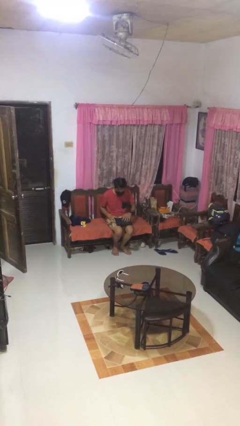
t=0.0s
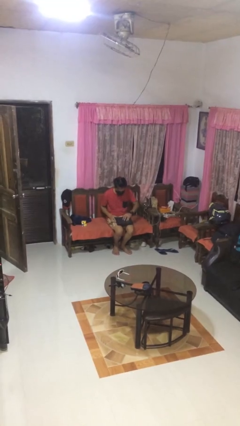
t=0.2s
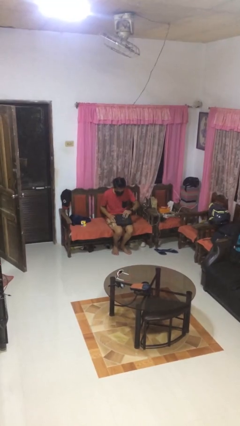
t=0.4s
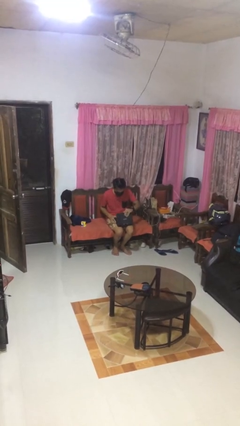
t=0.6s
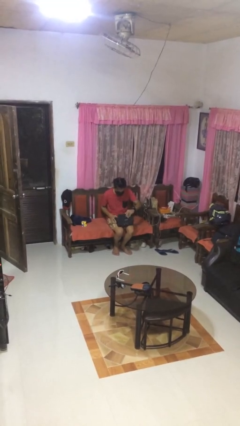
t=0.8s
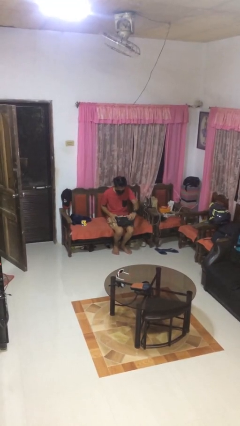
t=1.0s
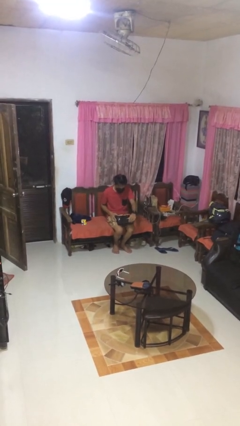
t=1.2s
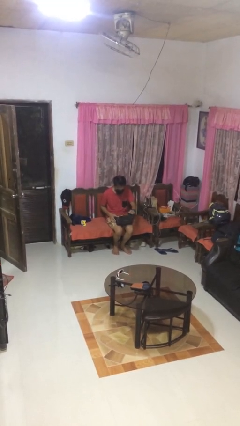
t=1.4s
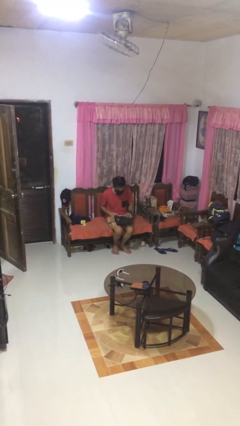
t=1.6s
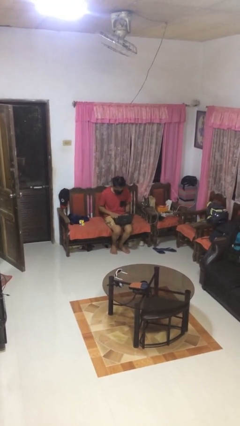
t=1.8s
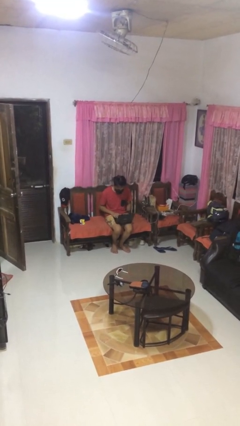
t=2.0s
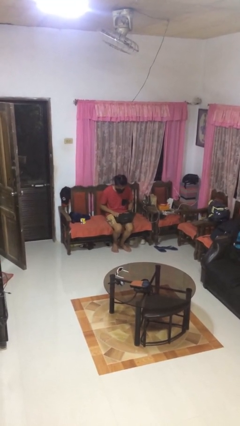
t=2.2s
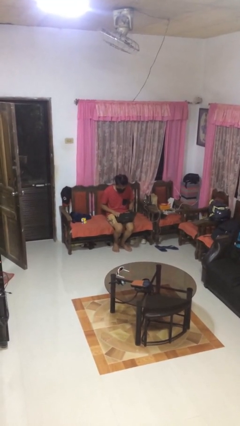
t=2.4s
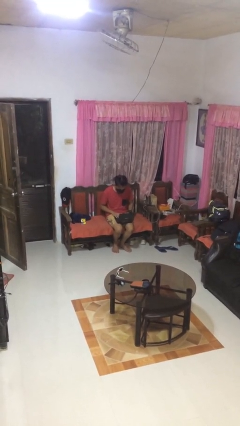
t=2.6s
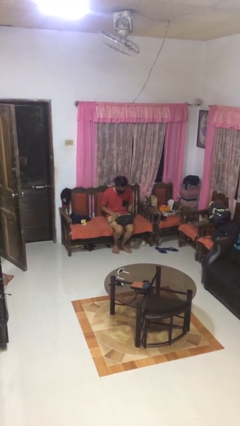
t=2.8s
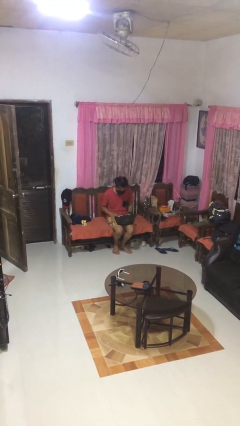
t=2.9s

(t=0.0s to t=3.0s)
person opens laptop

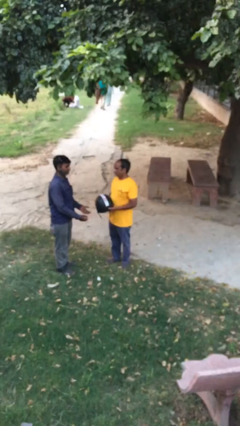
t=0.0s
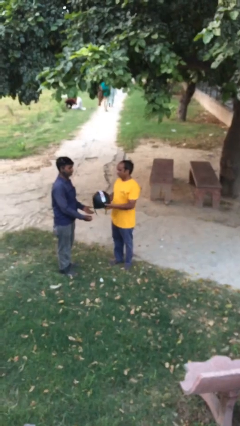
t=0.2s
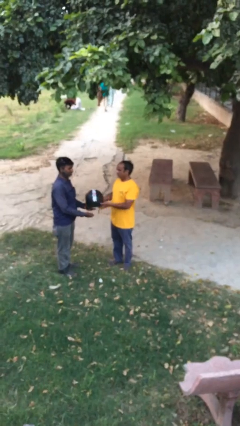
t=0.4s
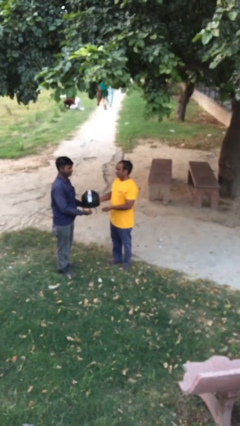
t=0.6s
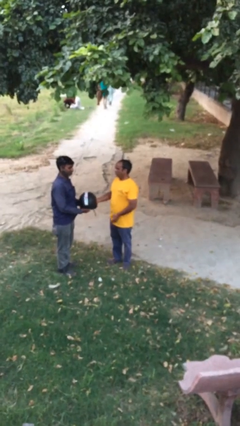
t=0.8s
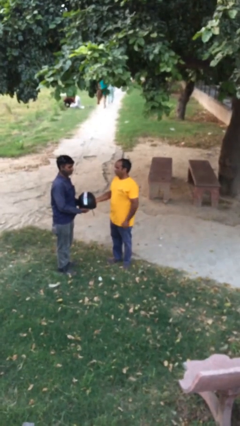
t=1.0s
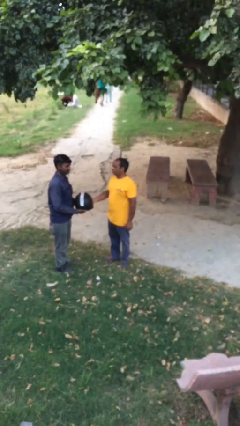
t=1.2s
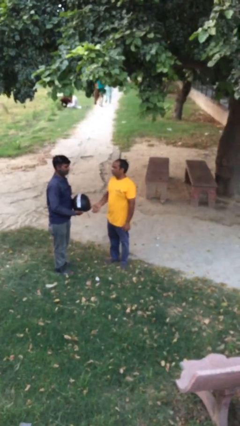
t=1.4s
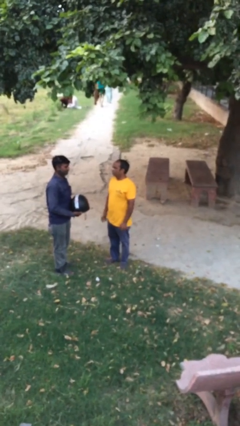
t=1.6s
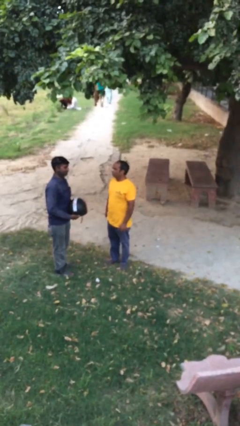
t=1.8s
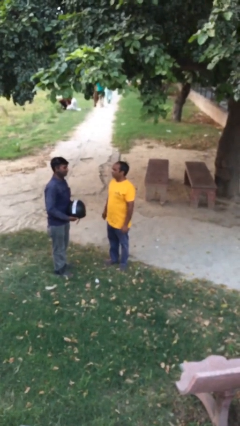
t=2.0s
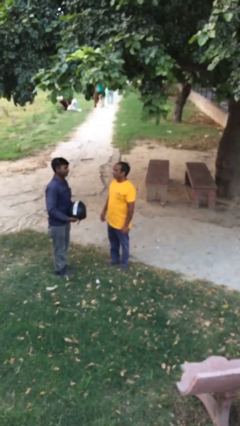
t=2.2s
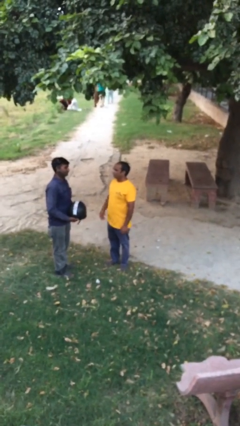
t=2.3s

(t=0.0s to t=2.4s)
person transfers object to person

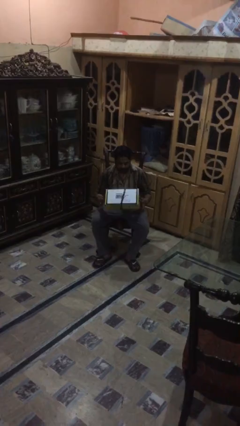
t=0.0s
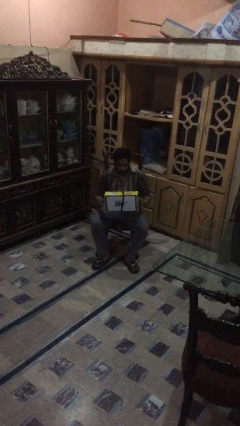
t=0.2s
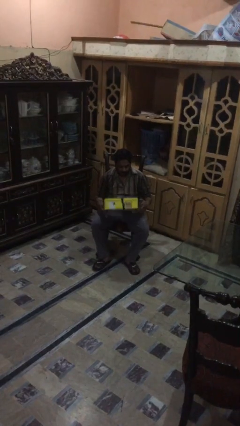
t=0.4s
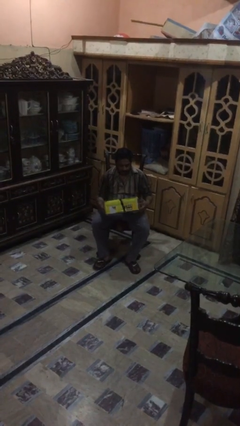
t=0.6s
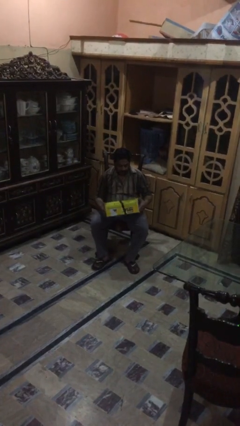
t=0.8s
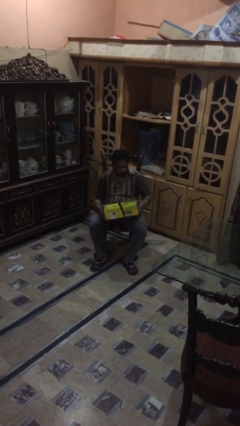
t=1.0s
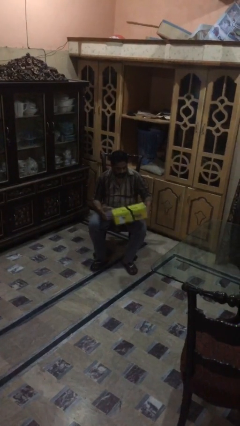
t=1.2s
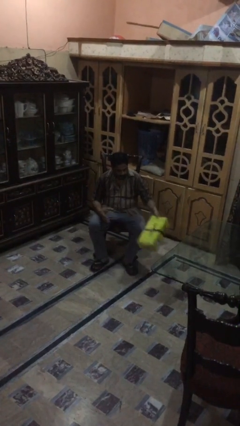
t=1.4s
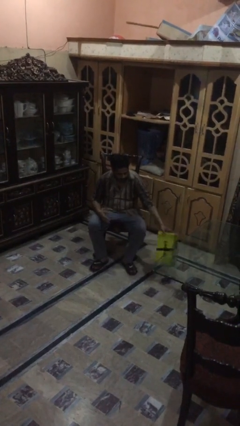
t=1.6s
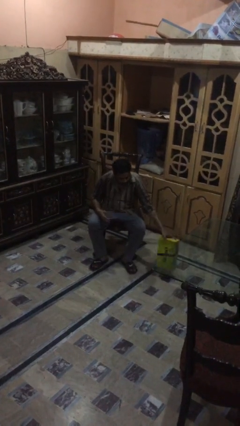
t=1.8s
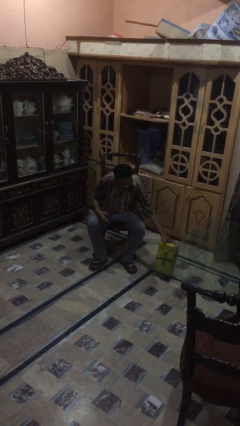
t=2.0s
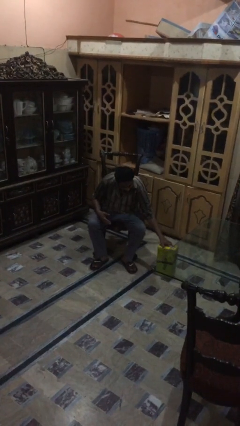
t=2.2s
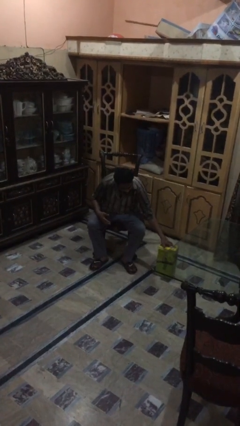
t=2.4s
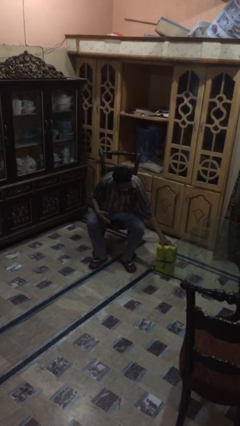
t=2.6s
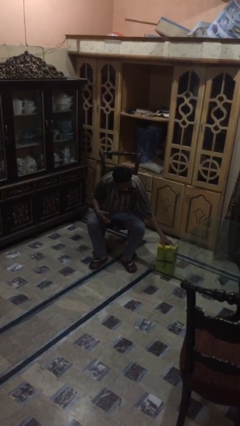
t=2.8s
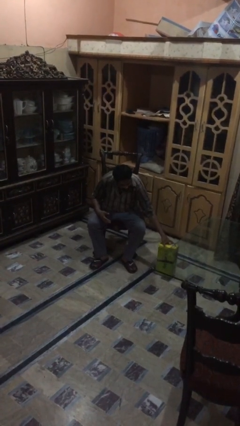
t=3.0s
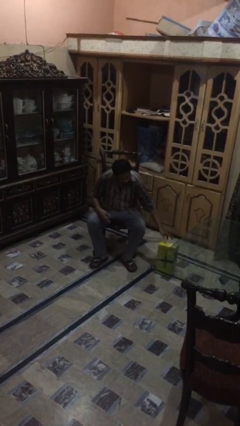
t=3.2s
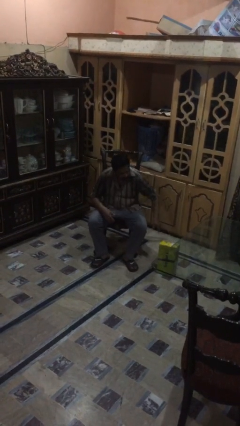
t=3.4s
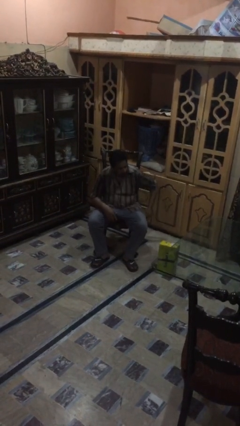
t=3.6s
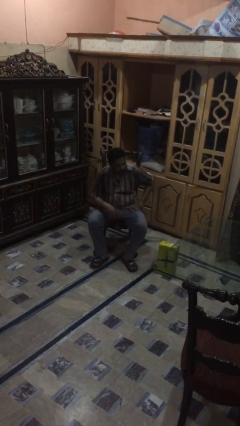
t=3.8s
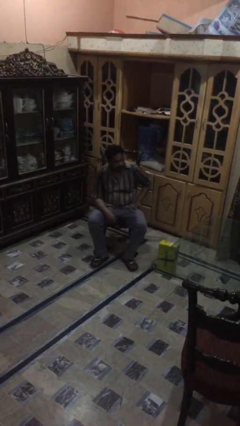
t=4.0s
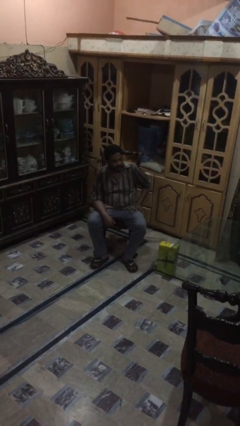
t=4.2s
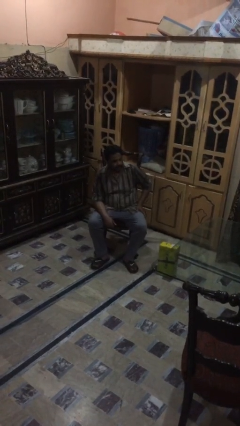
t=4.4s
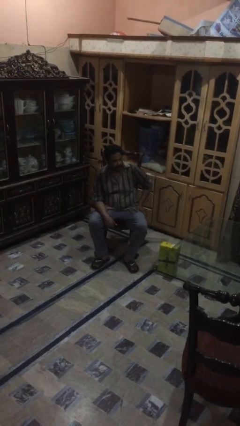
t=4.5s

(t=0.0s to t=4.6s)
person puts down object on floor

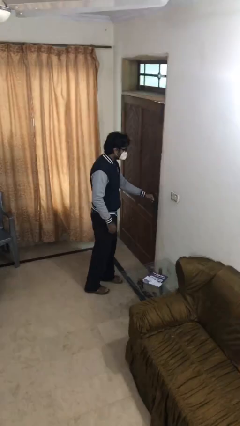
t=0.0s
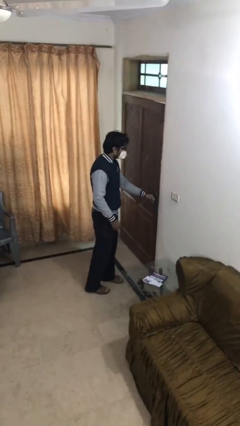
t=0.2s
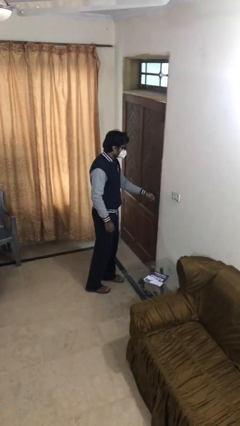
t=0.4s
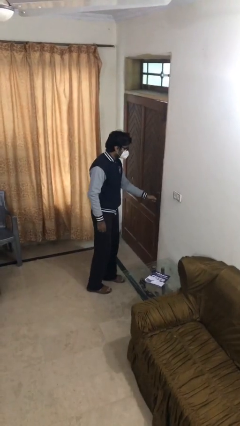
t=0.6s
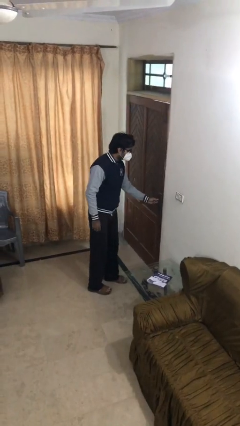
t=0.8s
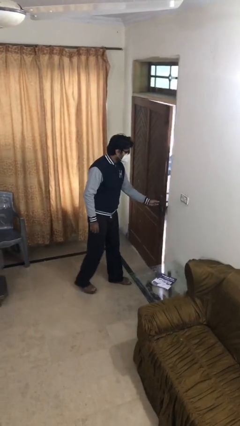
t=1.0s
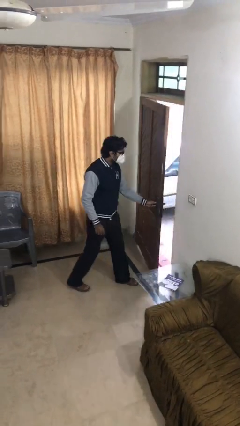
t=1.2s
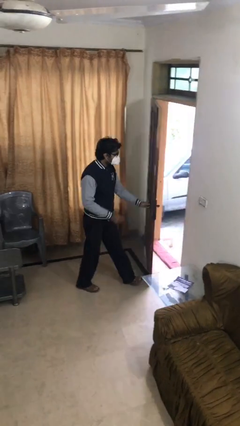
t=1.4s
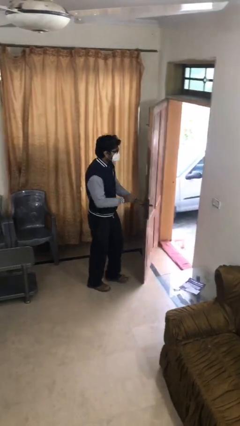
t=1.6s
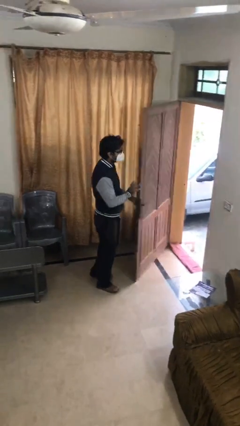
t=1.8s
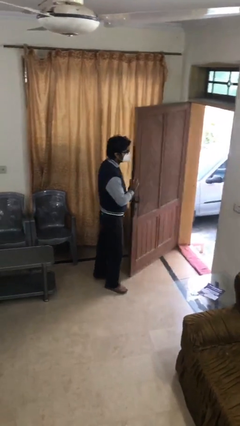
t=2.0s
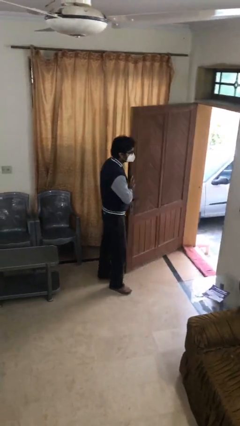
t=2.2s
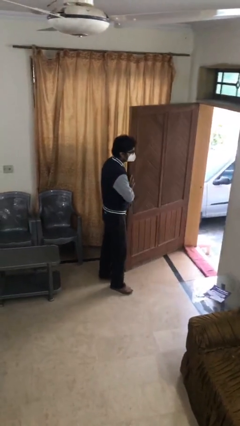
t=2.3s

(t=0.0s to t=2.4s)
person opens facility door

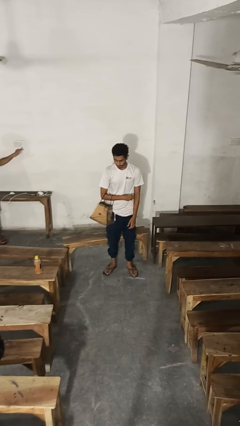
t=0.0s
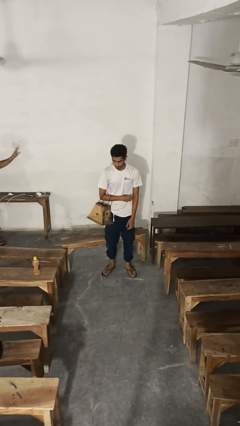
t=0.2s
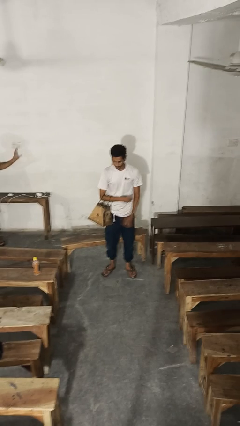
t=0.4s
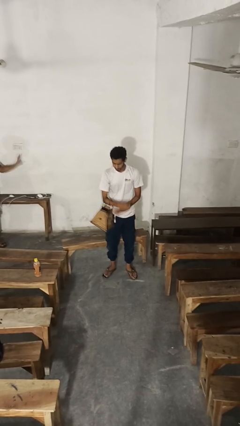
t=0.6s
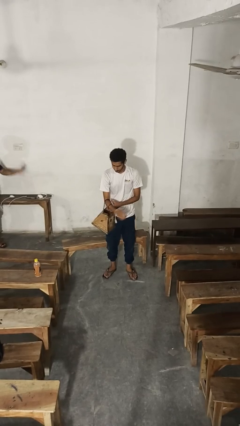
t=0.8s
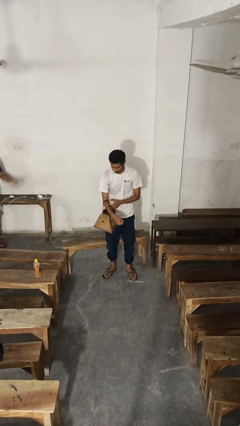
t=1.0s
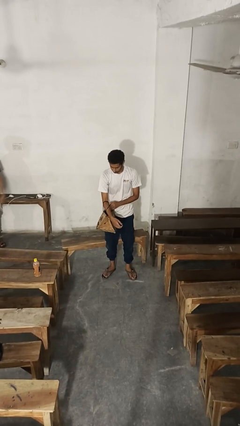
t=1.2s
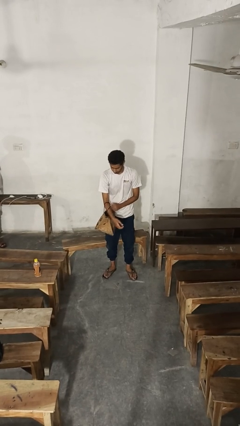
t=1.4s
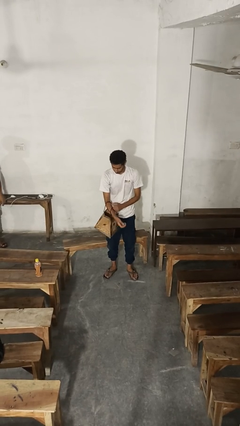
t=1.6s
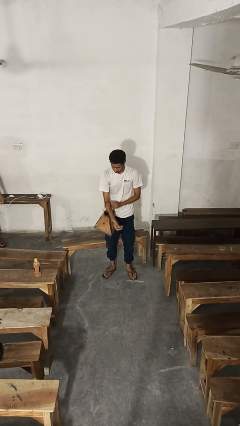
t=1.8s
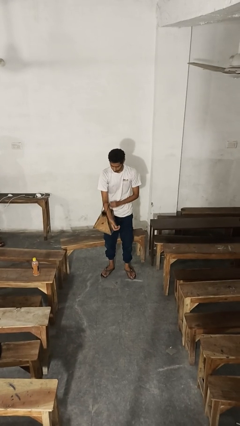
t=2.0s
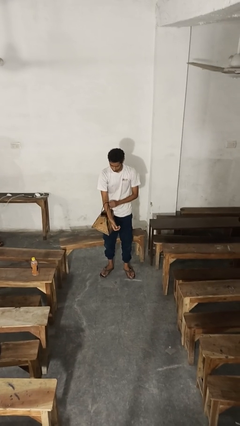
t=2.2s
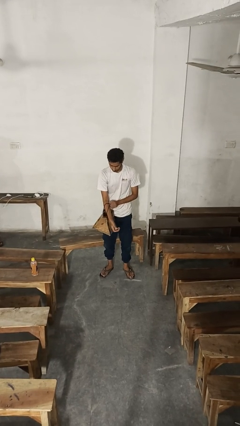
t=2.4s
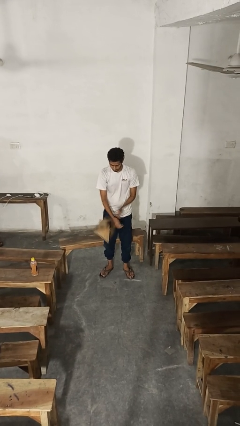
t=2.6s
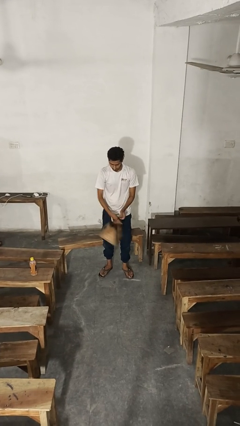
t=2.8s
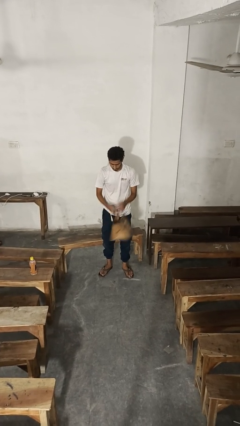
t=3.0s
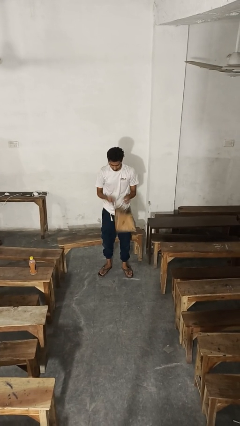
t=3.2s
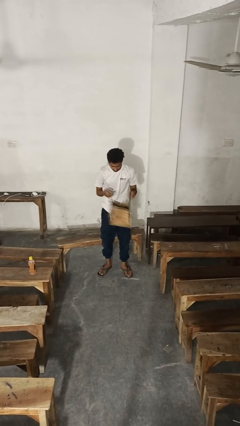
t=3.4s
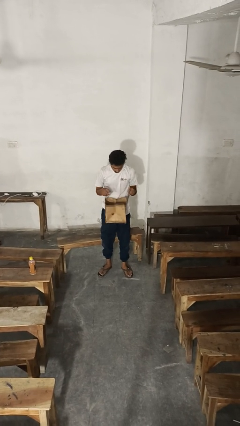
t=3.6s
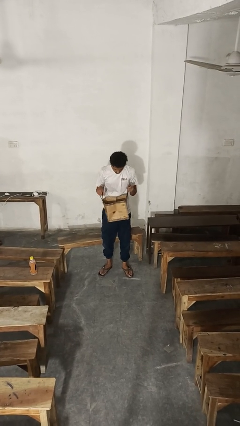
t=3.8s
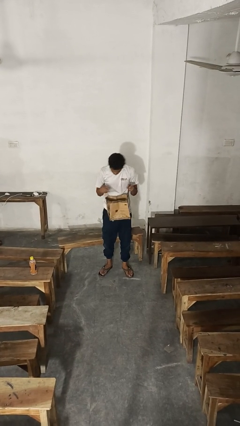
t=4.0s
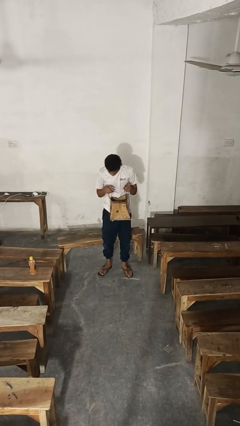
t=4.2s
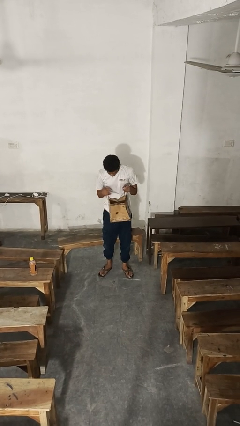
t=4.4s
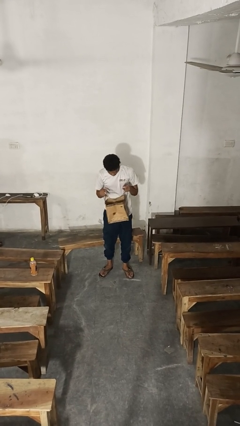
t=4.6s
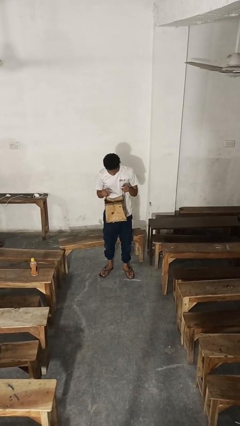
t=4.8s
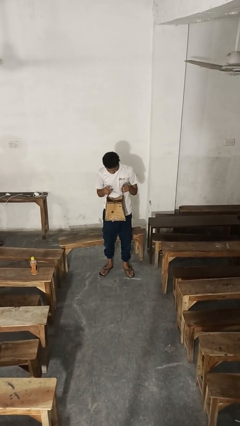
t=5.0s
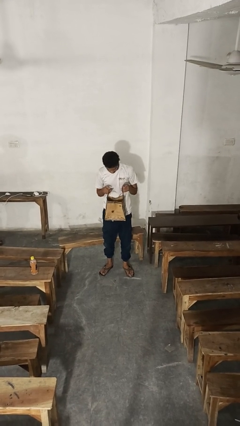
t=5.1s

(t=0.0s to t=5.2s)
person searches in purse

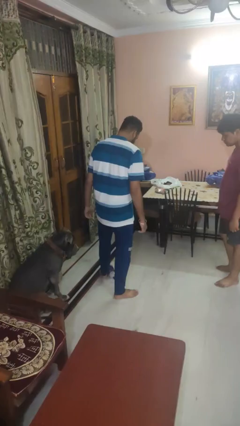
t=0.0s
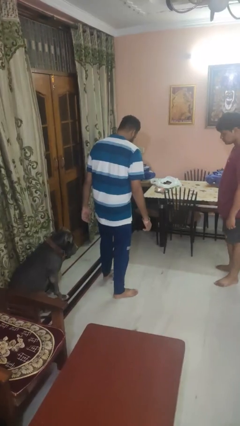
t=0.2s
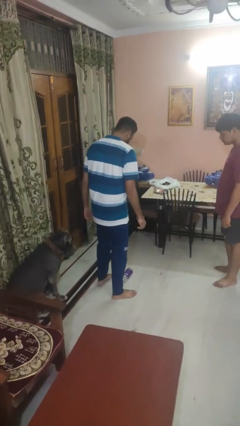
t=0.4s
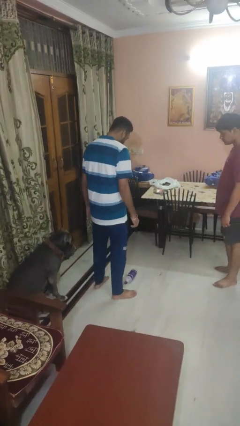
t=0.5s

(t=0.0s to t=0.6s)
person kicks object to person
